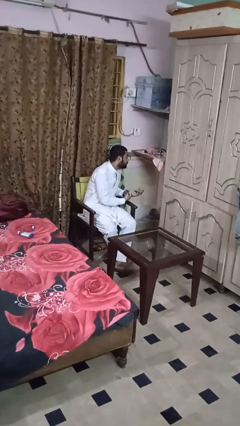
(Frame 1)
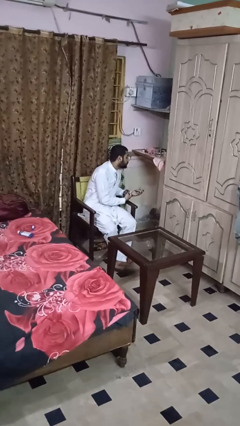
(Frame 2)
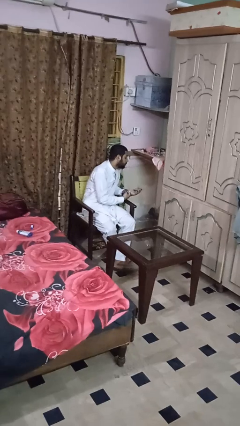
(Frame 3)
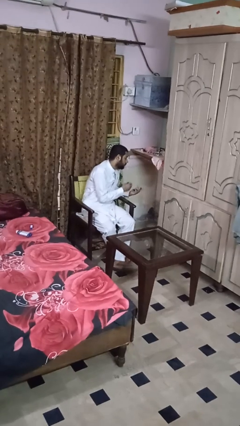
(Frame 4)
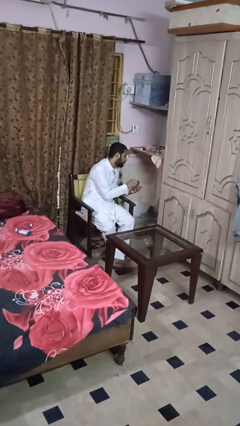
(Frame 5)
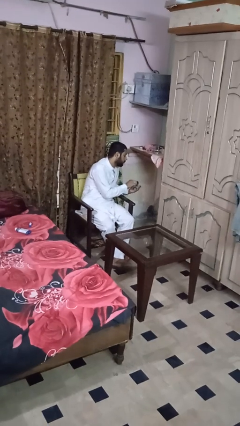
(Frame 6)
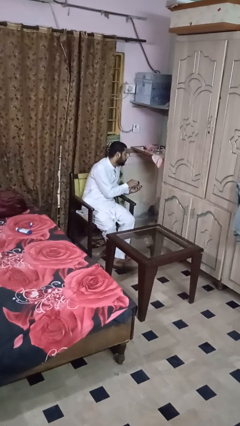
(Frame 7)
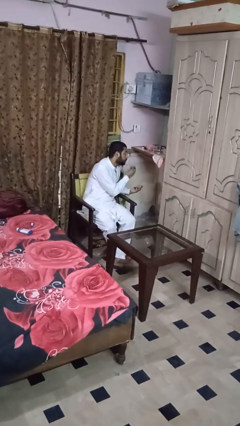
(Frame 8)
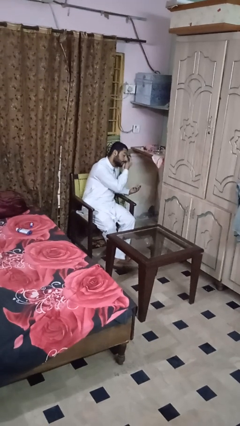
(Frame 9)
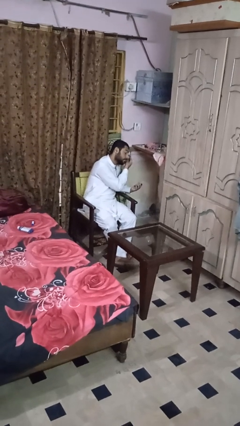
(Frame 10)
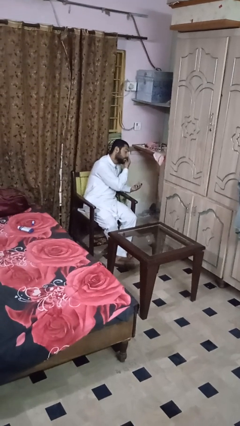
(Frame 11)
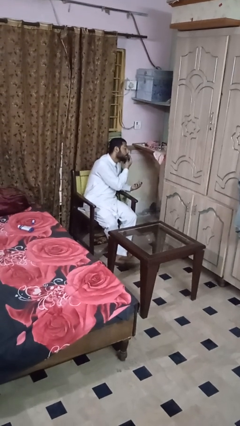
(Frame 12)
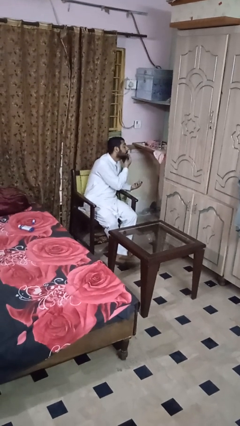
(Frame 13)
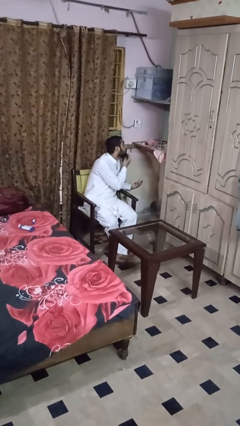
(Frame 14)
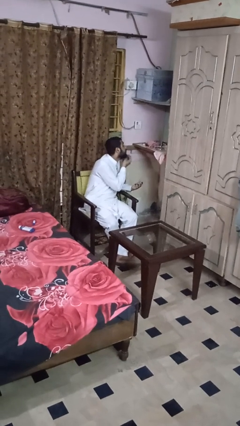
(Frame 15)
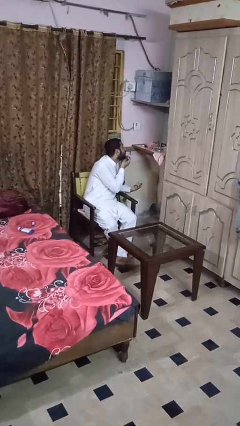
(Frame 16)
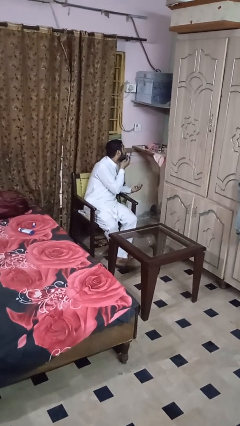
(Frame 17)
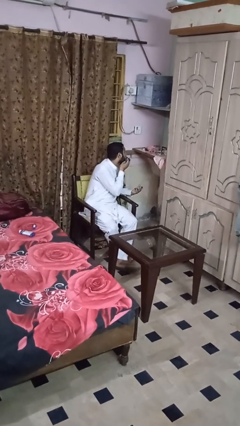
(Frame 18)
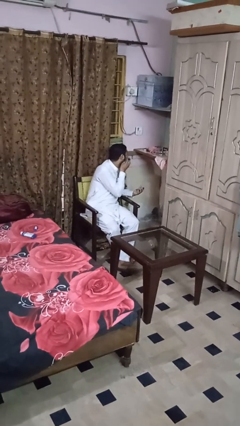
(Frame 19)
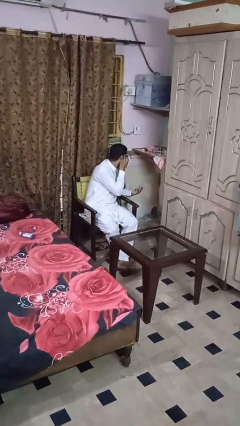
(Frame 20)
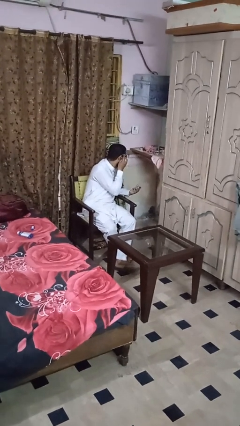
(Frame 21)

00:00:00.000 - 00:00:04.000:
person applies foundation makeup

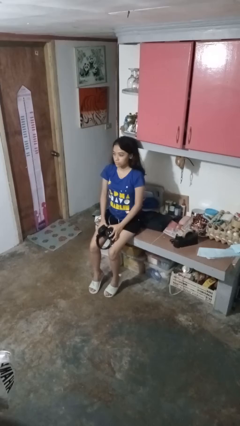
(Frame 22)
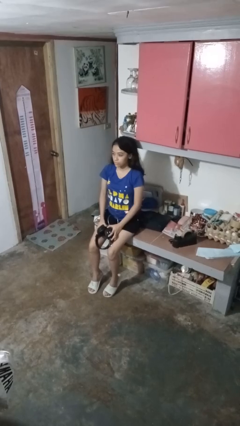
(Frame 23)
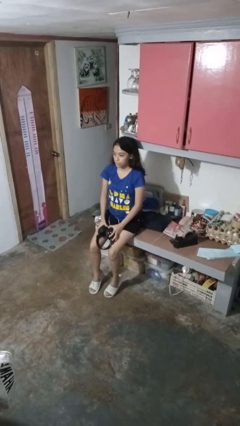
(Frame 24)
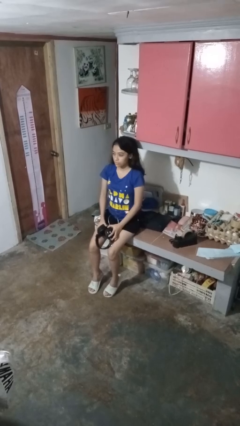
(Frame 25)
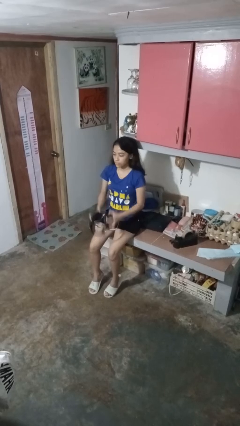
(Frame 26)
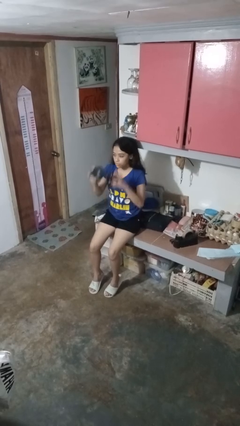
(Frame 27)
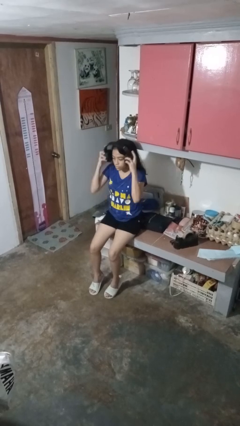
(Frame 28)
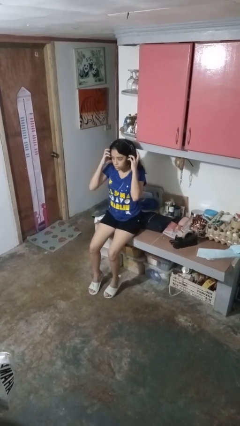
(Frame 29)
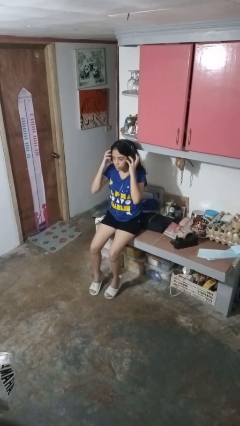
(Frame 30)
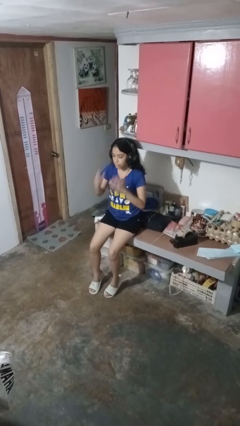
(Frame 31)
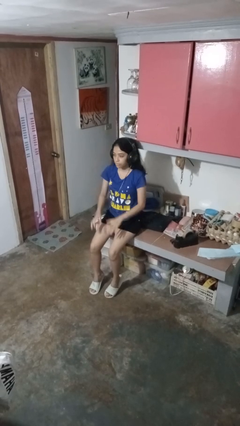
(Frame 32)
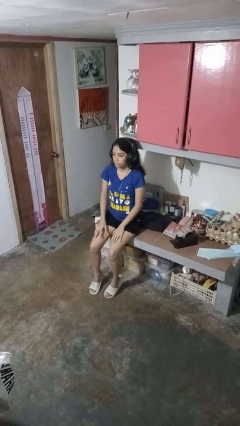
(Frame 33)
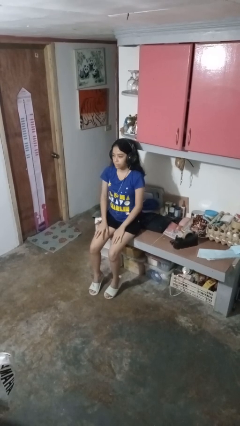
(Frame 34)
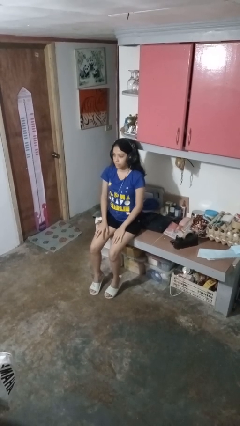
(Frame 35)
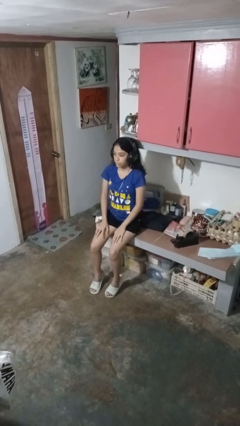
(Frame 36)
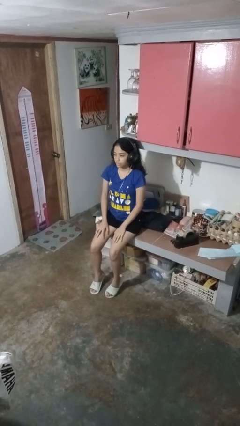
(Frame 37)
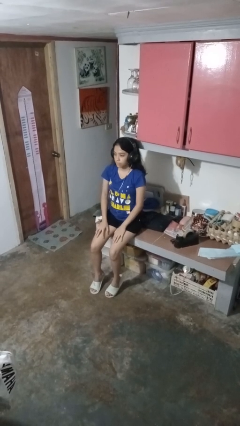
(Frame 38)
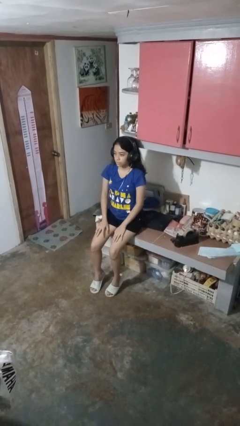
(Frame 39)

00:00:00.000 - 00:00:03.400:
person puts on headphones

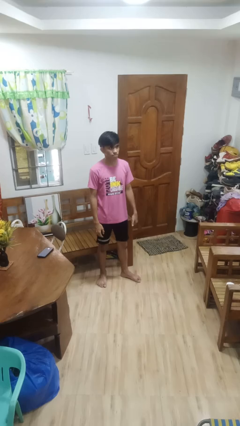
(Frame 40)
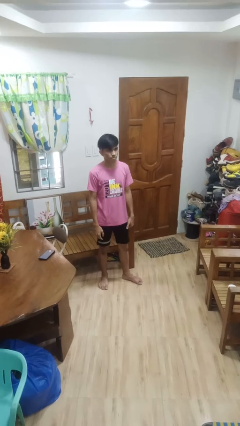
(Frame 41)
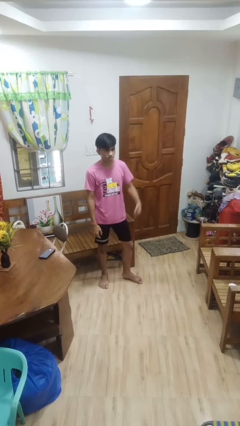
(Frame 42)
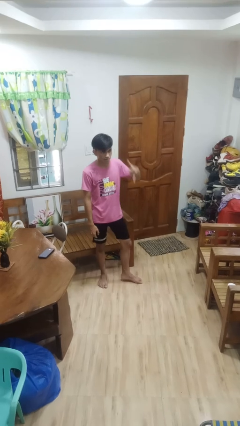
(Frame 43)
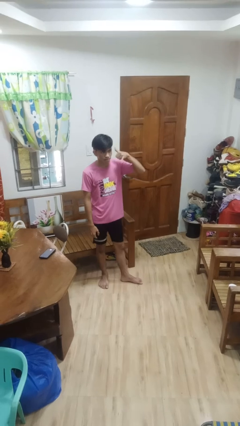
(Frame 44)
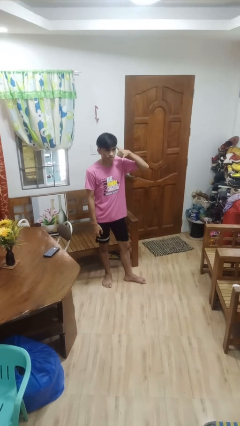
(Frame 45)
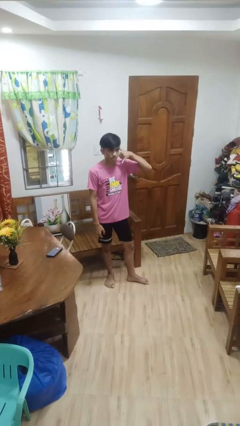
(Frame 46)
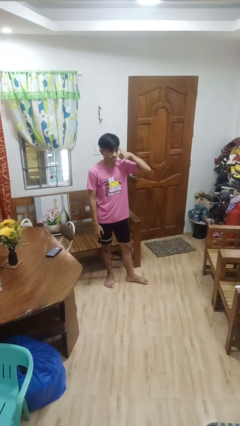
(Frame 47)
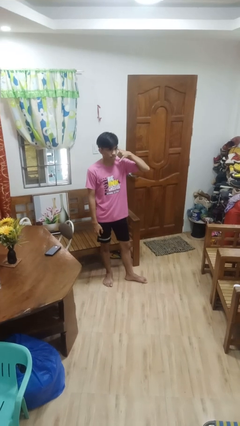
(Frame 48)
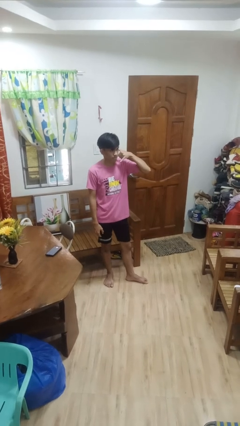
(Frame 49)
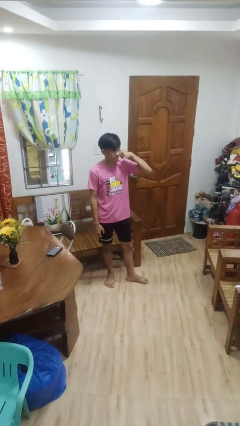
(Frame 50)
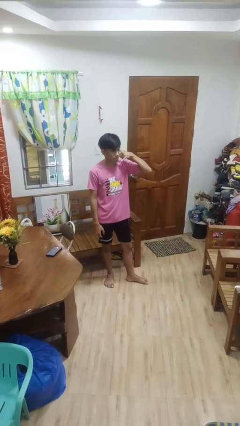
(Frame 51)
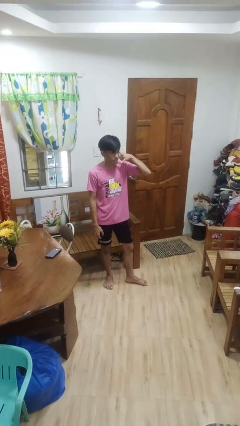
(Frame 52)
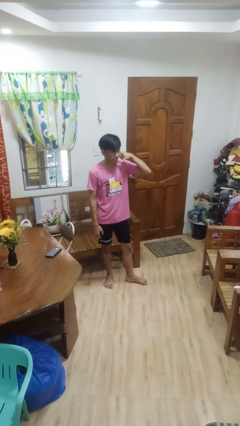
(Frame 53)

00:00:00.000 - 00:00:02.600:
person gestures call me

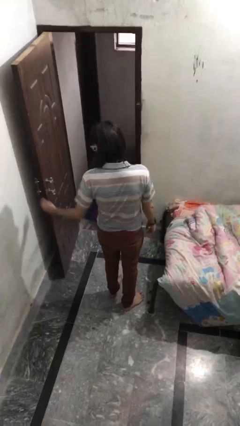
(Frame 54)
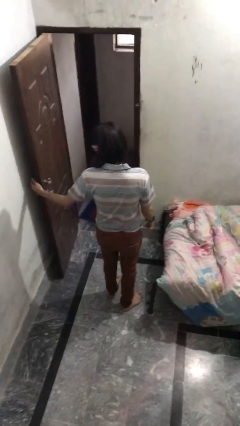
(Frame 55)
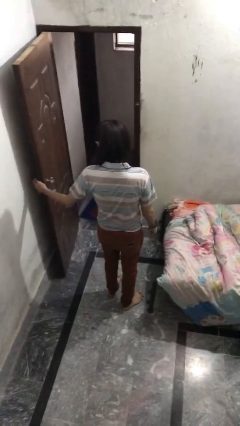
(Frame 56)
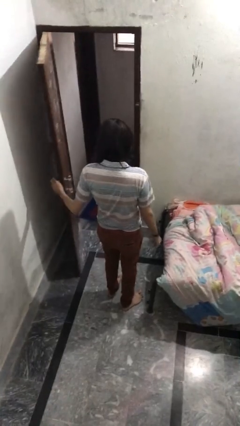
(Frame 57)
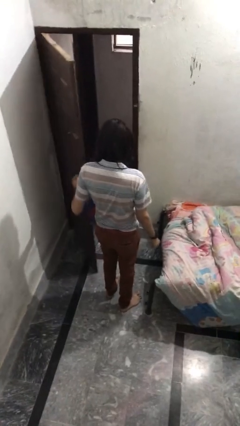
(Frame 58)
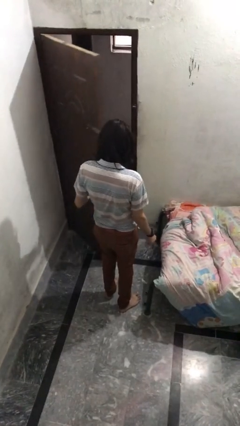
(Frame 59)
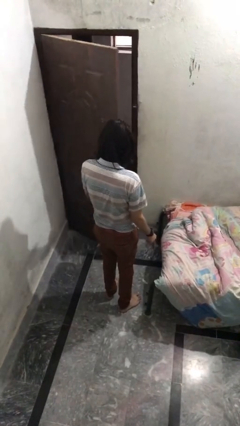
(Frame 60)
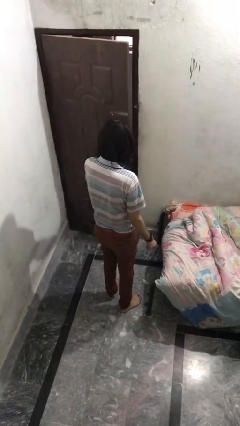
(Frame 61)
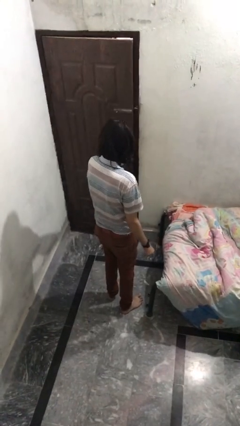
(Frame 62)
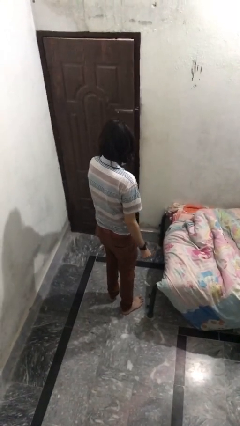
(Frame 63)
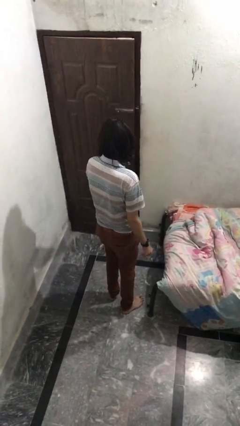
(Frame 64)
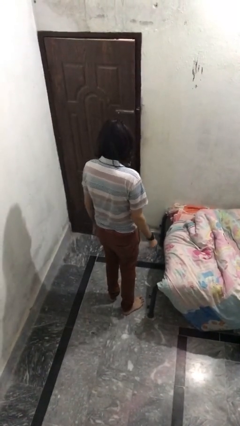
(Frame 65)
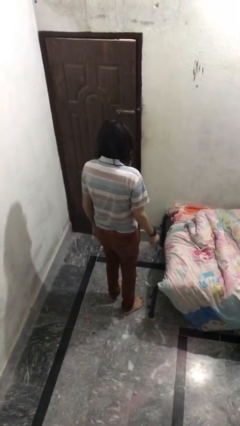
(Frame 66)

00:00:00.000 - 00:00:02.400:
person closes facility door

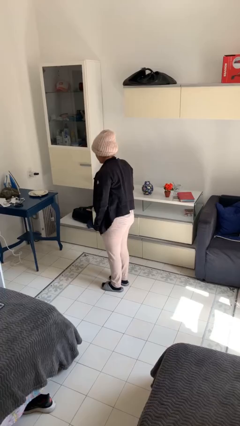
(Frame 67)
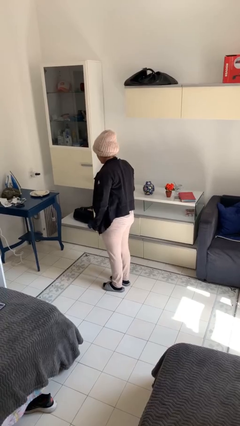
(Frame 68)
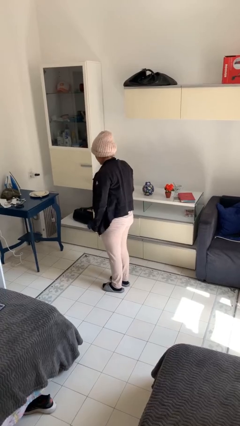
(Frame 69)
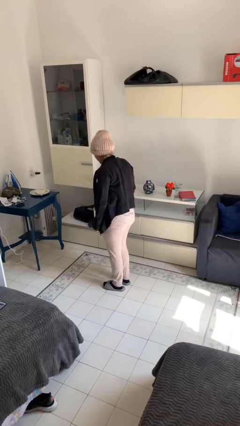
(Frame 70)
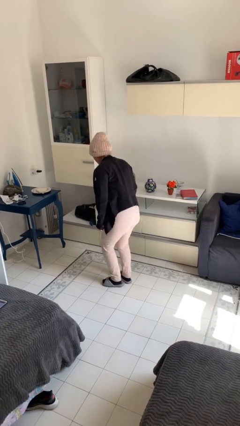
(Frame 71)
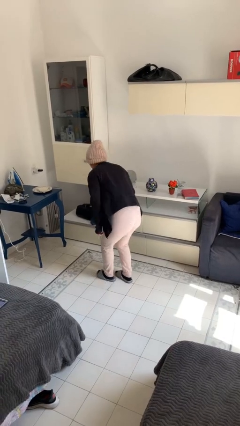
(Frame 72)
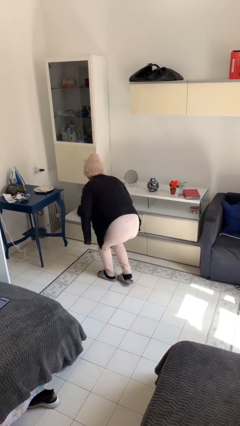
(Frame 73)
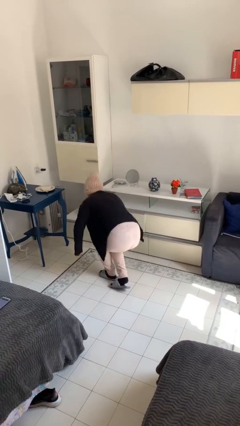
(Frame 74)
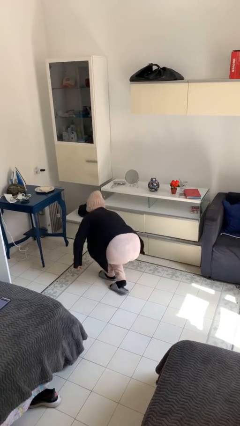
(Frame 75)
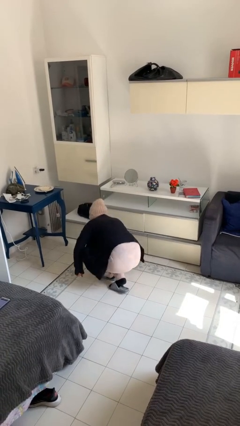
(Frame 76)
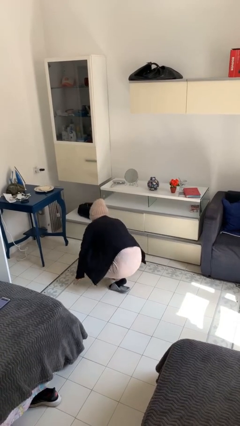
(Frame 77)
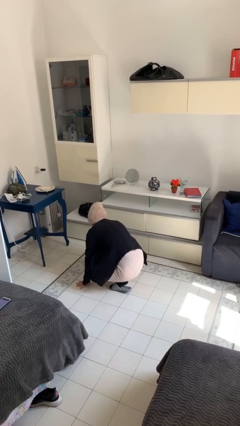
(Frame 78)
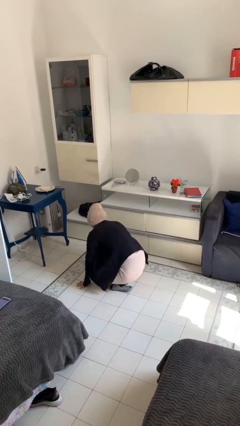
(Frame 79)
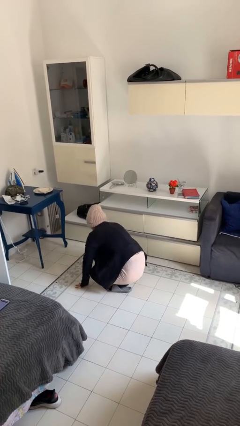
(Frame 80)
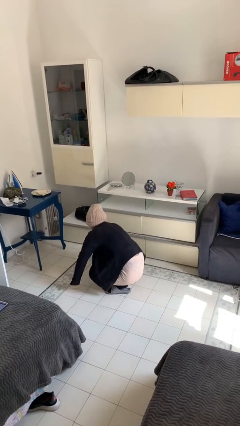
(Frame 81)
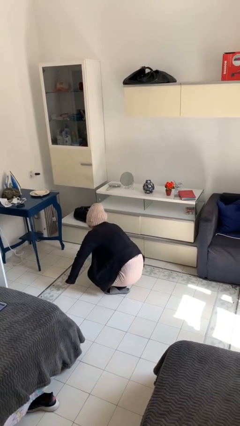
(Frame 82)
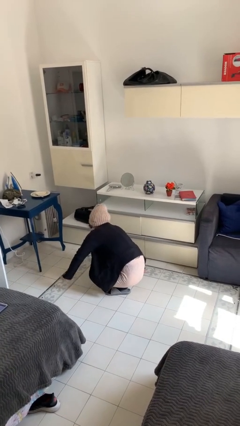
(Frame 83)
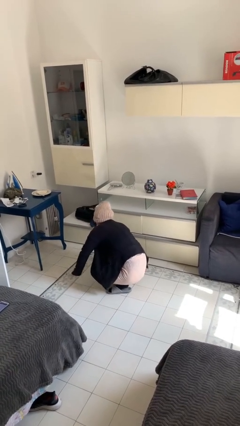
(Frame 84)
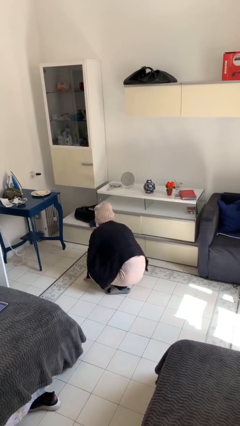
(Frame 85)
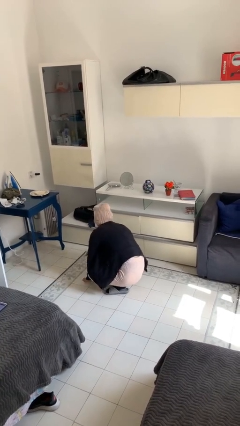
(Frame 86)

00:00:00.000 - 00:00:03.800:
person sits crisscross

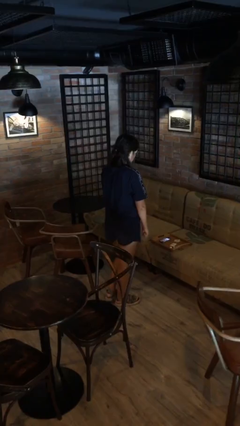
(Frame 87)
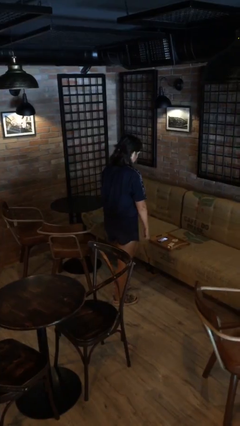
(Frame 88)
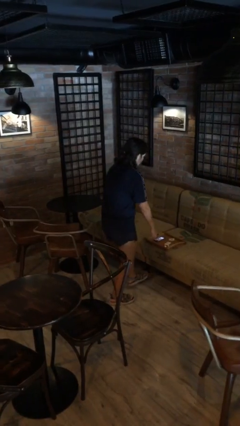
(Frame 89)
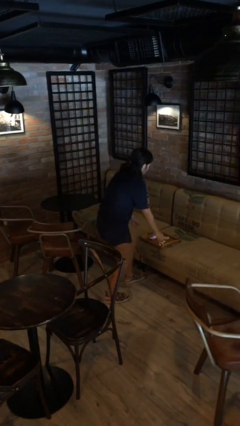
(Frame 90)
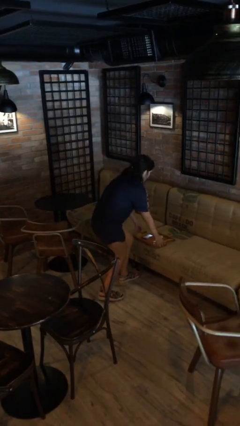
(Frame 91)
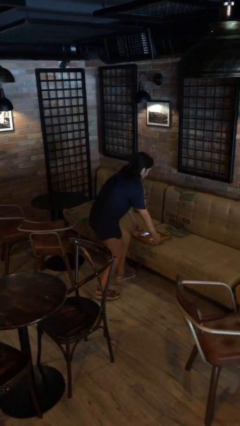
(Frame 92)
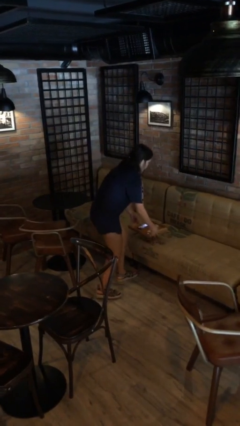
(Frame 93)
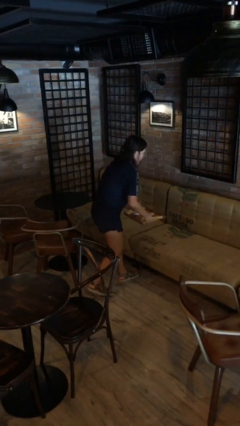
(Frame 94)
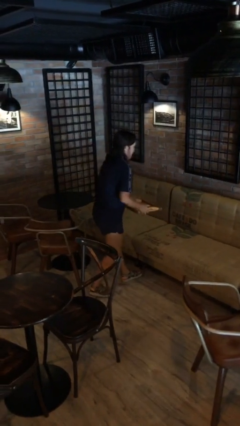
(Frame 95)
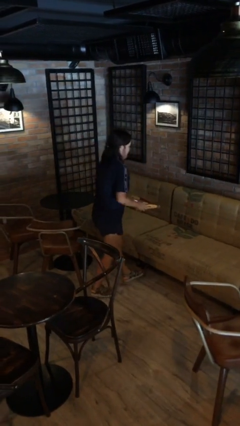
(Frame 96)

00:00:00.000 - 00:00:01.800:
person picks up object from couch
